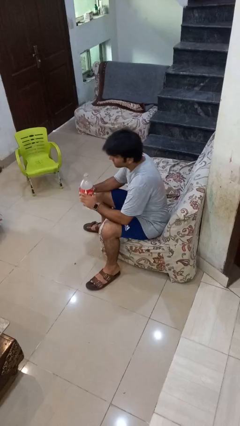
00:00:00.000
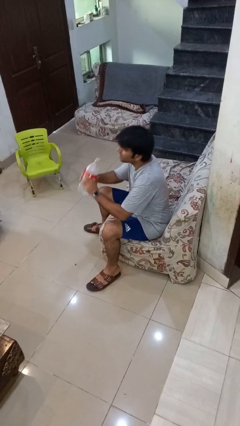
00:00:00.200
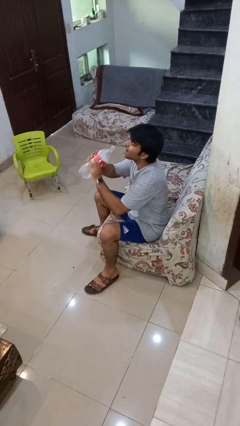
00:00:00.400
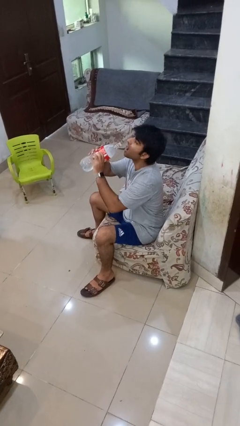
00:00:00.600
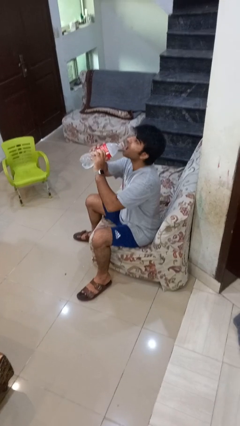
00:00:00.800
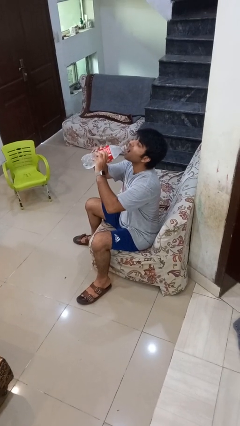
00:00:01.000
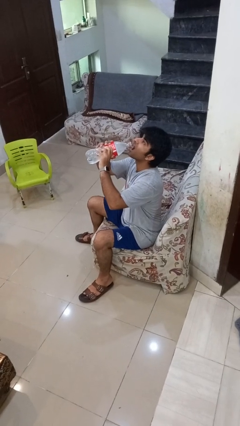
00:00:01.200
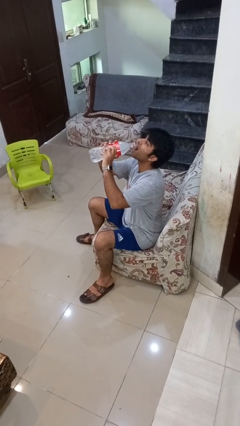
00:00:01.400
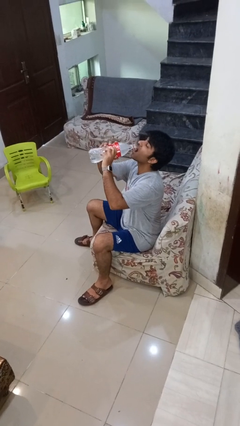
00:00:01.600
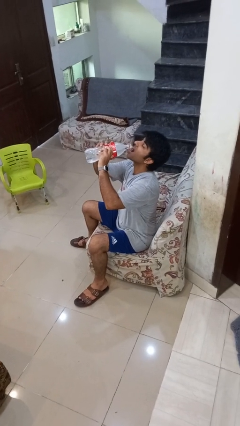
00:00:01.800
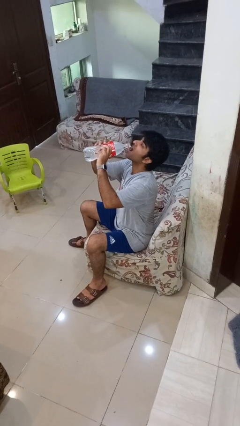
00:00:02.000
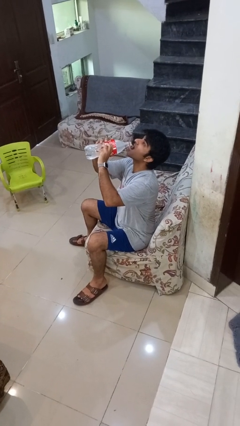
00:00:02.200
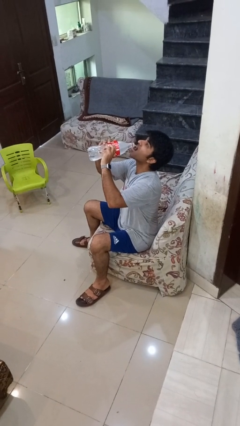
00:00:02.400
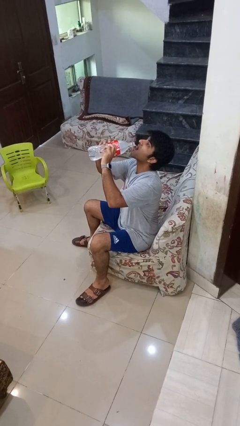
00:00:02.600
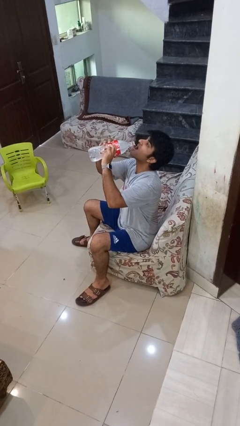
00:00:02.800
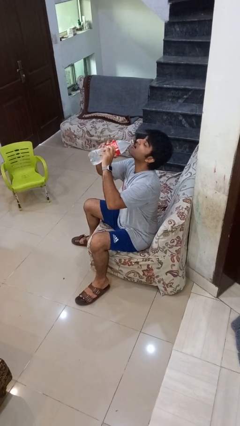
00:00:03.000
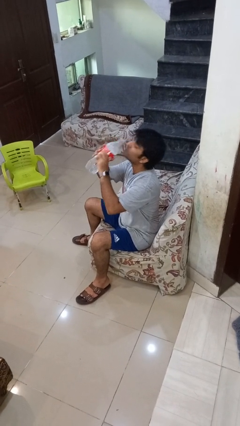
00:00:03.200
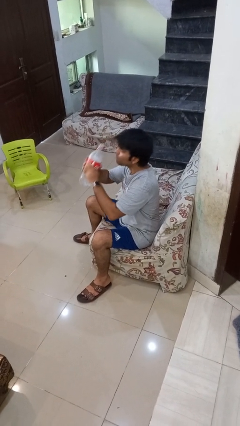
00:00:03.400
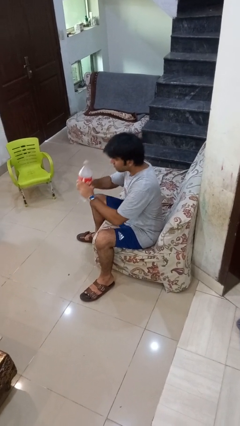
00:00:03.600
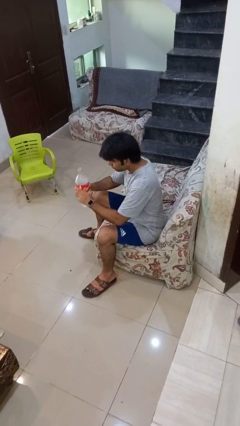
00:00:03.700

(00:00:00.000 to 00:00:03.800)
person drinks from bottle

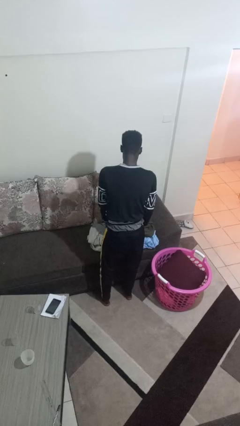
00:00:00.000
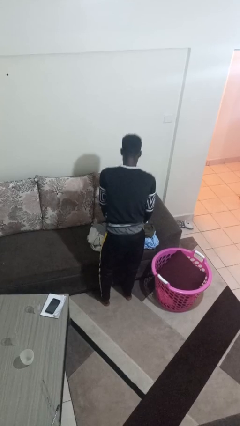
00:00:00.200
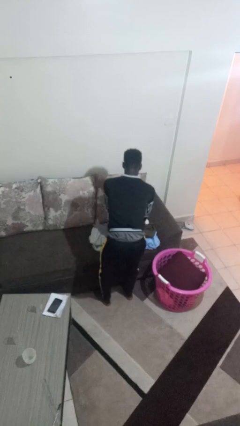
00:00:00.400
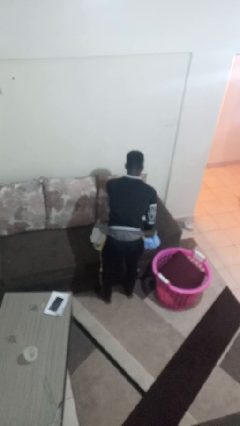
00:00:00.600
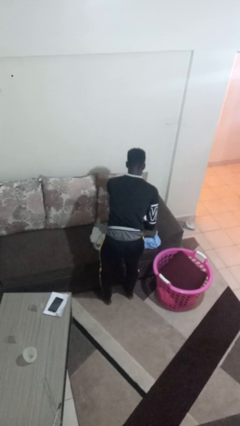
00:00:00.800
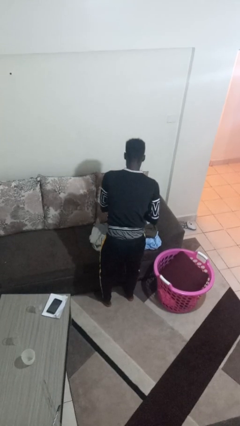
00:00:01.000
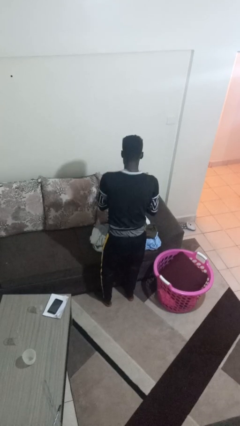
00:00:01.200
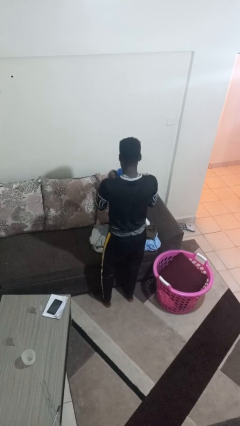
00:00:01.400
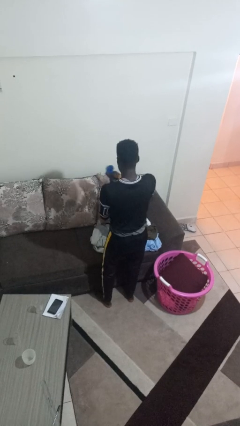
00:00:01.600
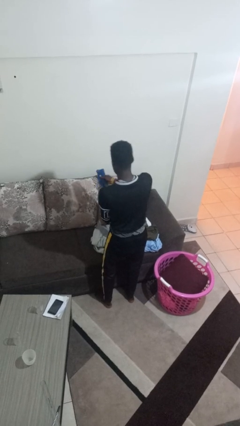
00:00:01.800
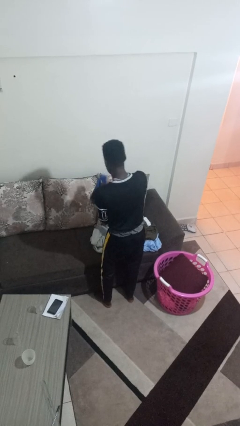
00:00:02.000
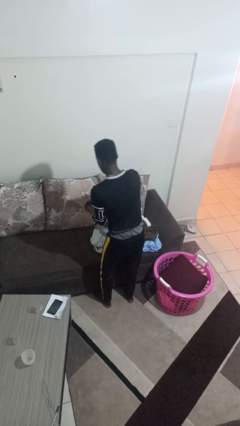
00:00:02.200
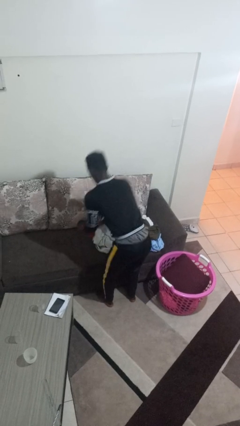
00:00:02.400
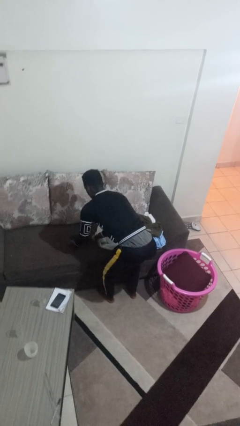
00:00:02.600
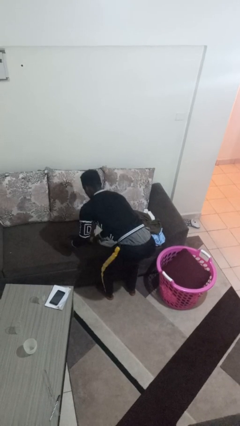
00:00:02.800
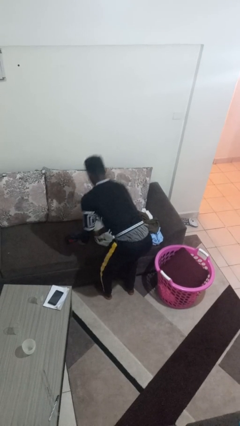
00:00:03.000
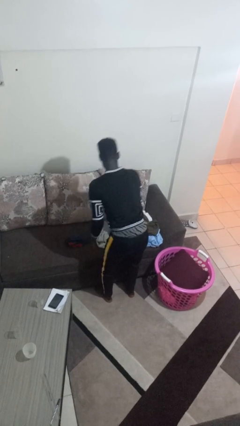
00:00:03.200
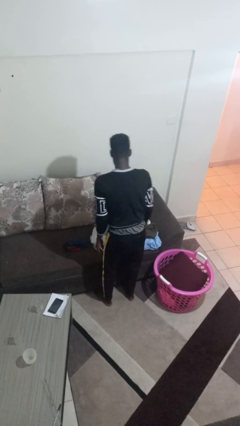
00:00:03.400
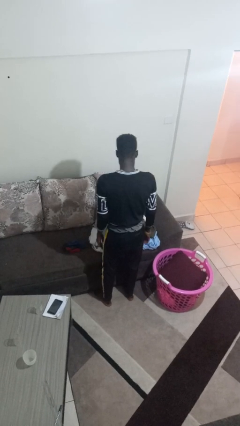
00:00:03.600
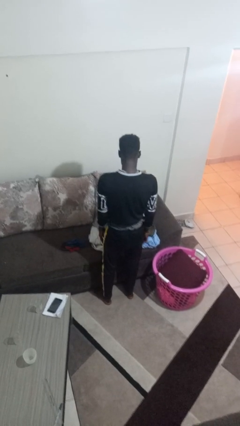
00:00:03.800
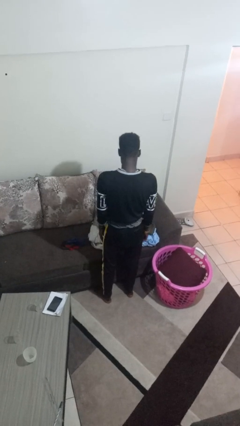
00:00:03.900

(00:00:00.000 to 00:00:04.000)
person folds socks

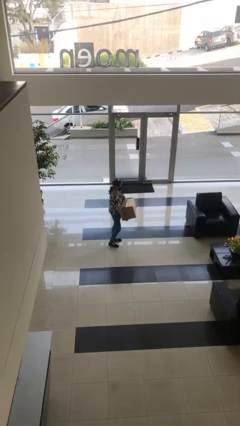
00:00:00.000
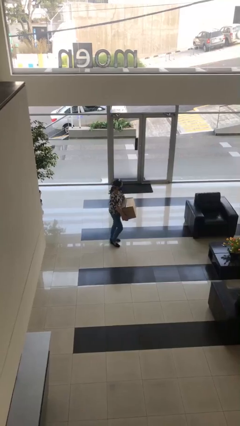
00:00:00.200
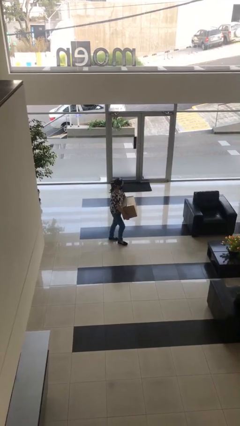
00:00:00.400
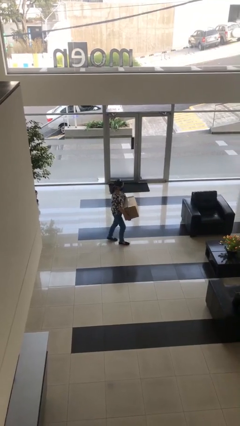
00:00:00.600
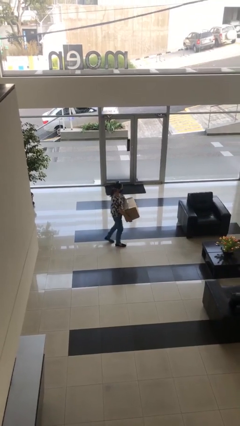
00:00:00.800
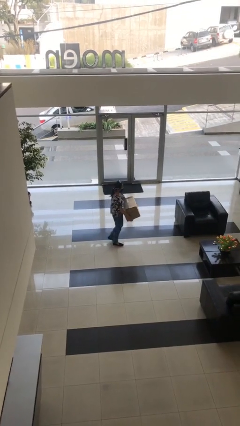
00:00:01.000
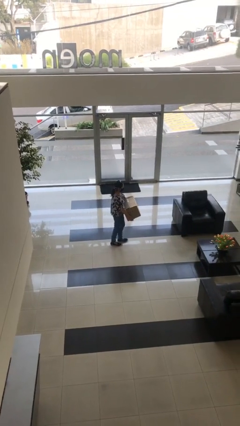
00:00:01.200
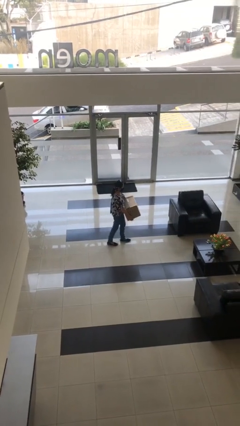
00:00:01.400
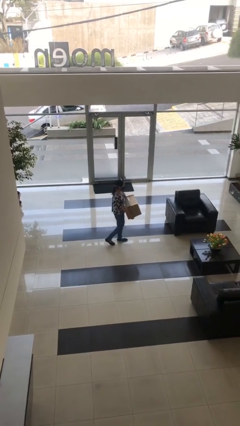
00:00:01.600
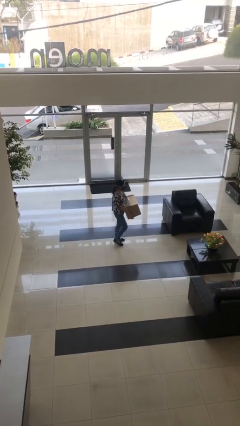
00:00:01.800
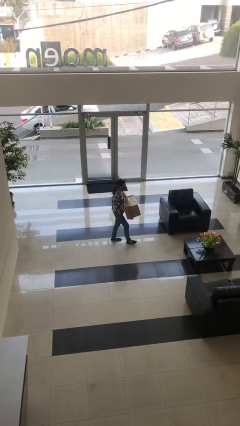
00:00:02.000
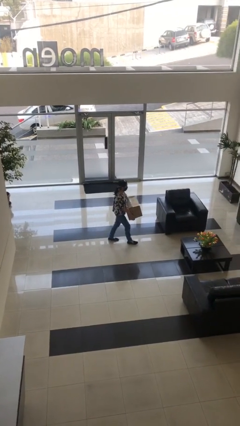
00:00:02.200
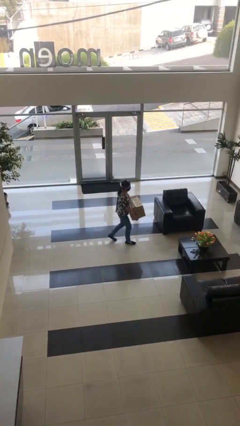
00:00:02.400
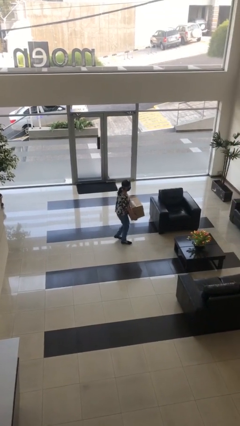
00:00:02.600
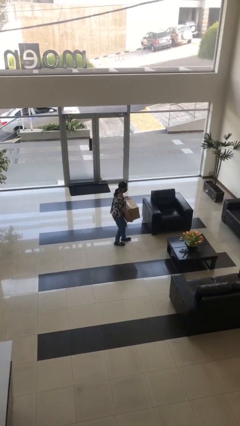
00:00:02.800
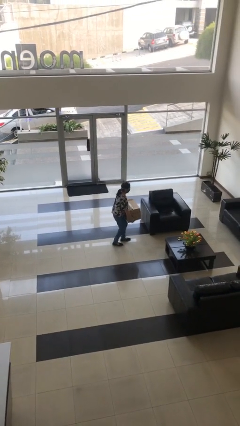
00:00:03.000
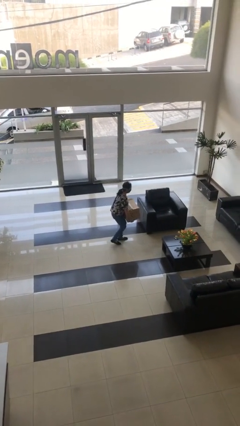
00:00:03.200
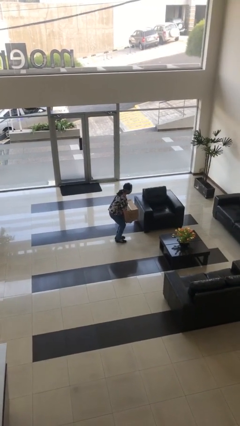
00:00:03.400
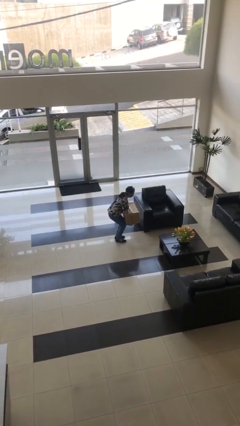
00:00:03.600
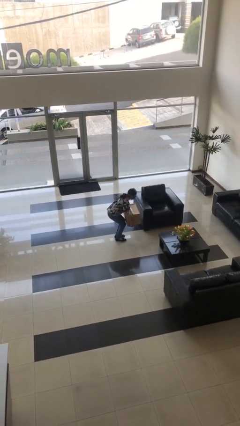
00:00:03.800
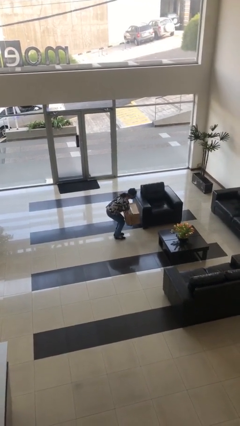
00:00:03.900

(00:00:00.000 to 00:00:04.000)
person carries heavy object

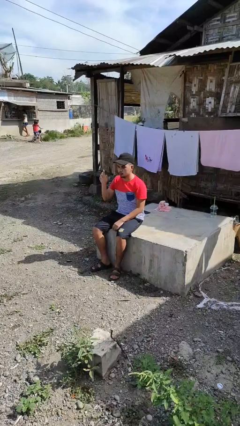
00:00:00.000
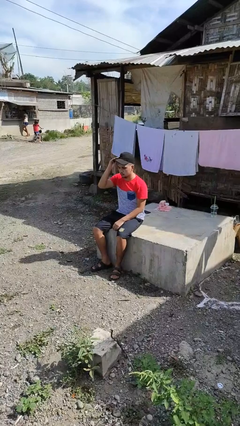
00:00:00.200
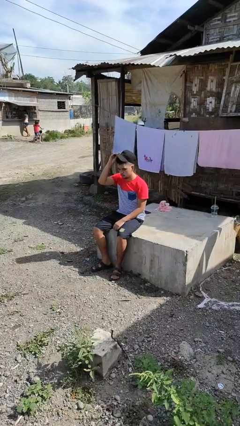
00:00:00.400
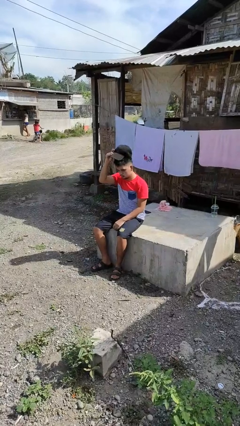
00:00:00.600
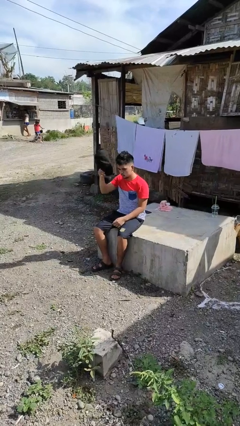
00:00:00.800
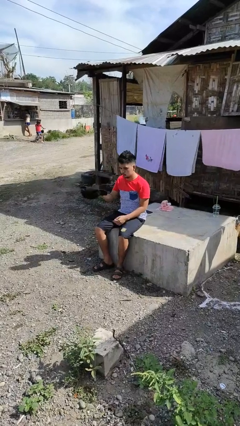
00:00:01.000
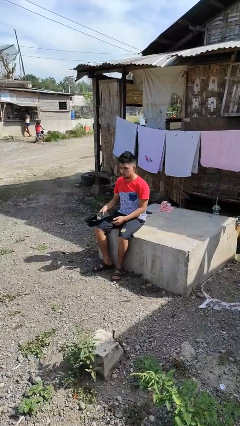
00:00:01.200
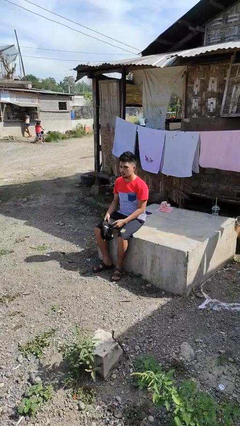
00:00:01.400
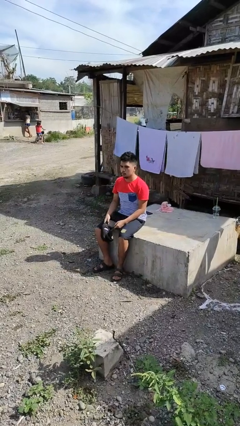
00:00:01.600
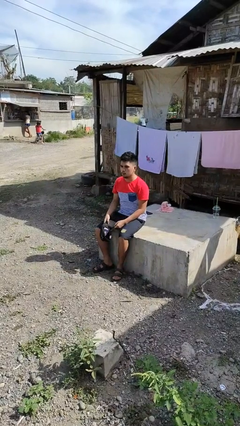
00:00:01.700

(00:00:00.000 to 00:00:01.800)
person takes off hat

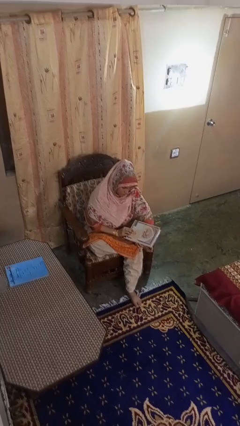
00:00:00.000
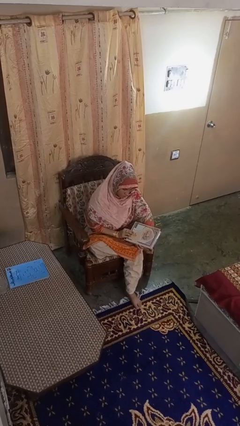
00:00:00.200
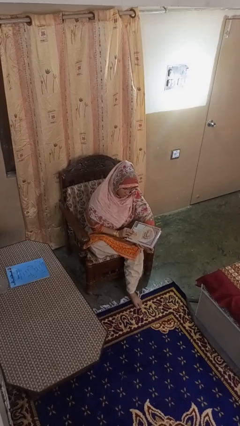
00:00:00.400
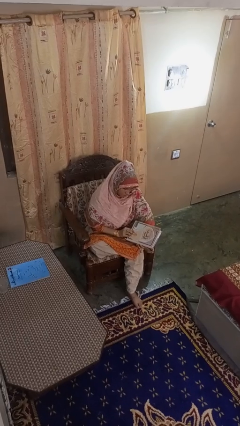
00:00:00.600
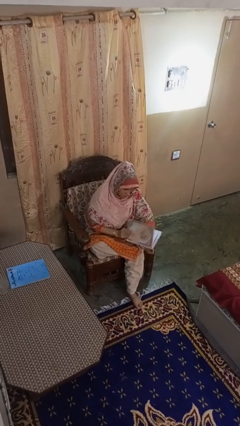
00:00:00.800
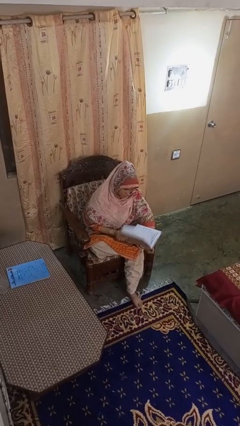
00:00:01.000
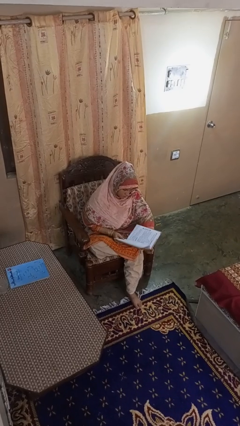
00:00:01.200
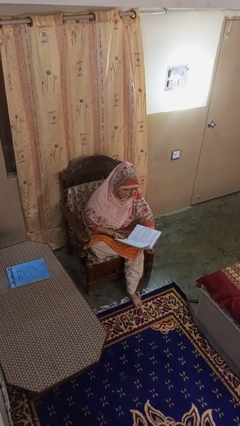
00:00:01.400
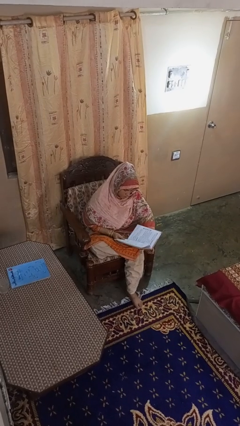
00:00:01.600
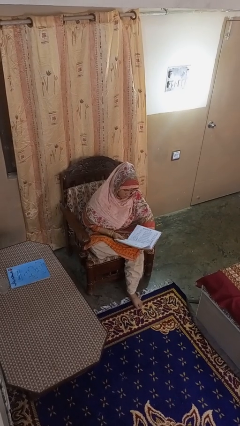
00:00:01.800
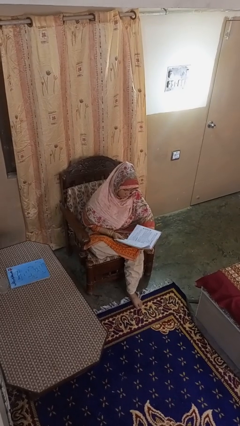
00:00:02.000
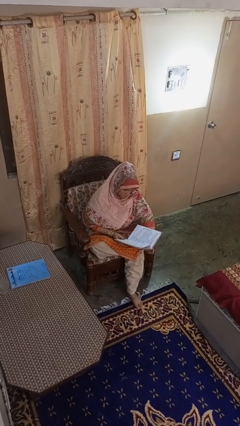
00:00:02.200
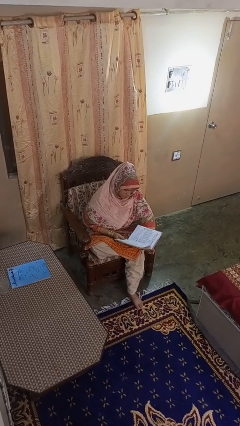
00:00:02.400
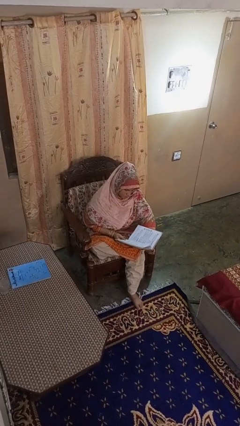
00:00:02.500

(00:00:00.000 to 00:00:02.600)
person reads book

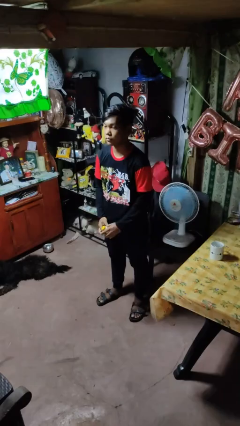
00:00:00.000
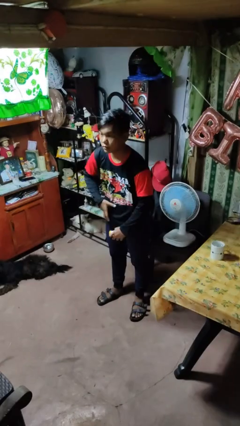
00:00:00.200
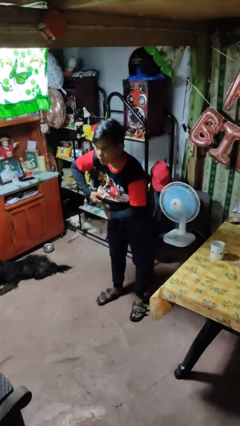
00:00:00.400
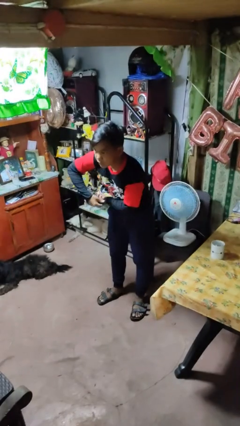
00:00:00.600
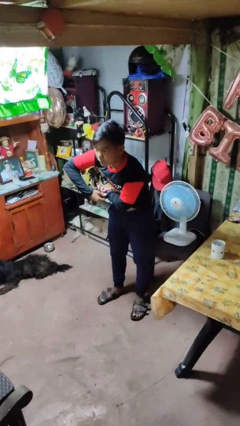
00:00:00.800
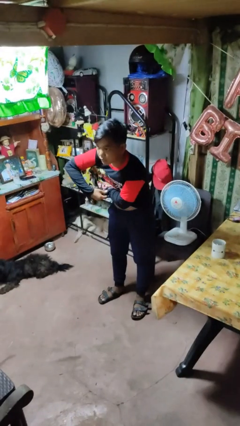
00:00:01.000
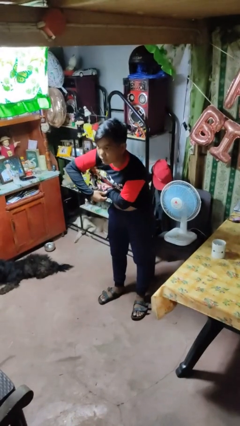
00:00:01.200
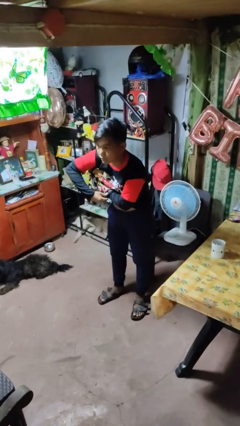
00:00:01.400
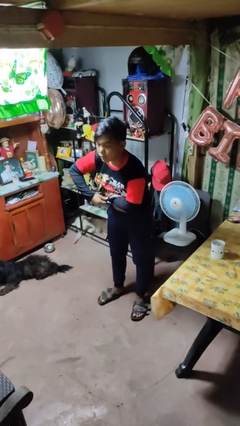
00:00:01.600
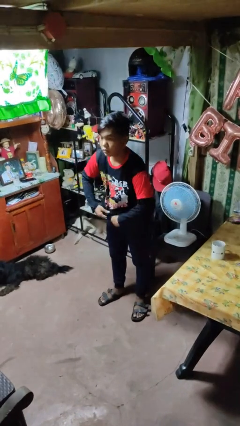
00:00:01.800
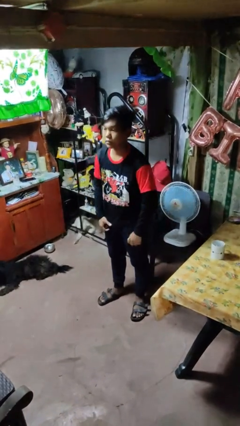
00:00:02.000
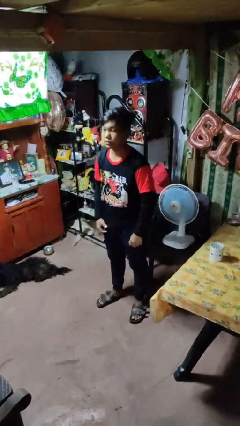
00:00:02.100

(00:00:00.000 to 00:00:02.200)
person applies deodorant
